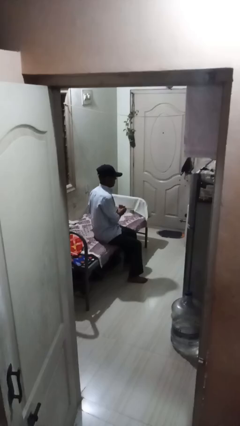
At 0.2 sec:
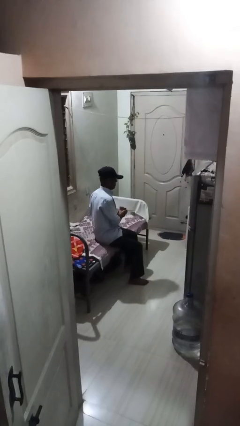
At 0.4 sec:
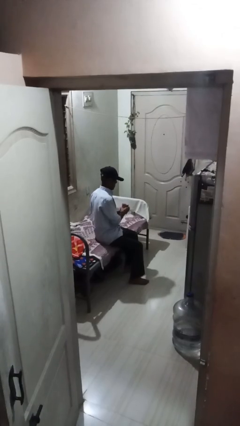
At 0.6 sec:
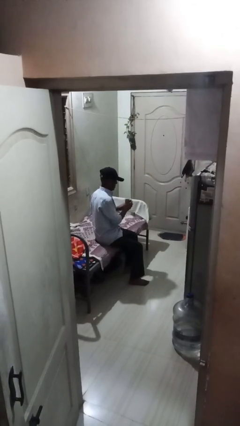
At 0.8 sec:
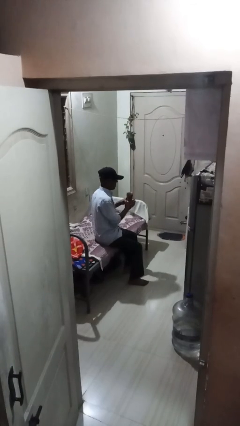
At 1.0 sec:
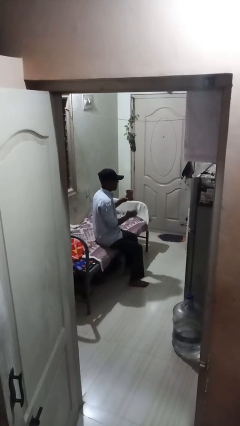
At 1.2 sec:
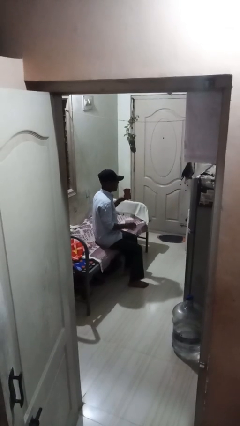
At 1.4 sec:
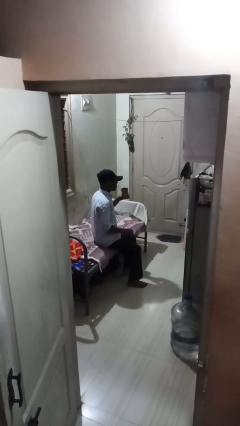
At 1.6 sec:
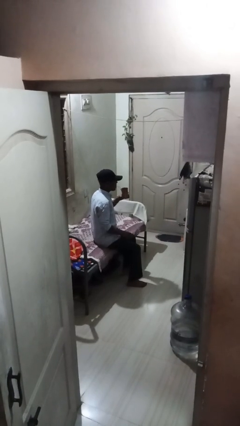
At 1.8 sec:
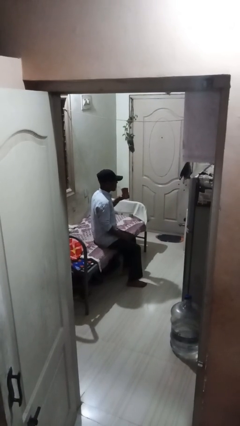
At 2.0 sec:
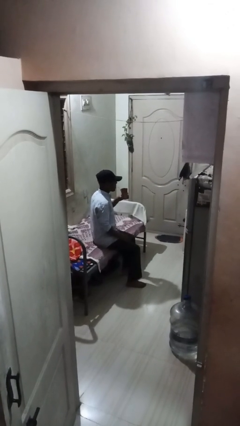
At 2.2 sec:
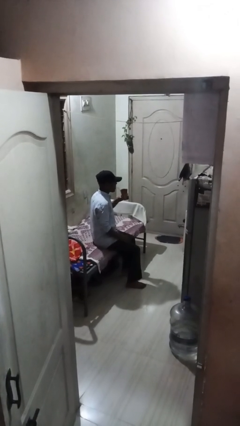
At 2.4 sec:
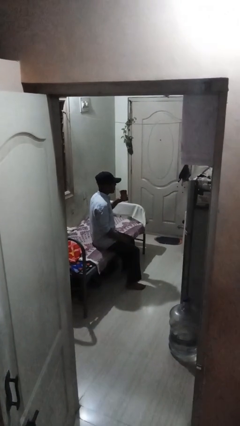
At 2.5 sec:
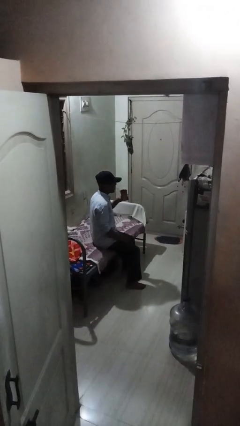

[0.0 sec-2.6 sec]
person drinks from straw

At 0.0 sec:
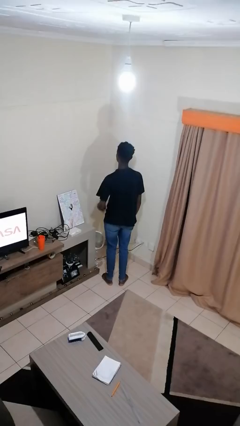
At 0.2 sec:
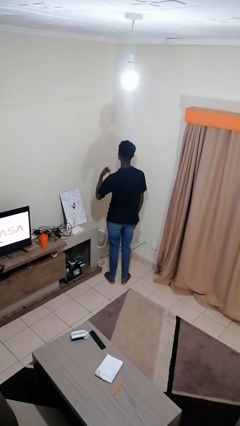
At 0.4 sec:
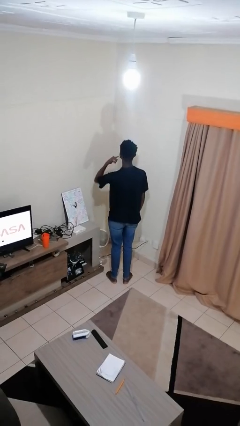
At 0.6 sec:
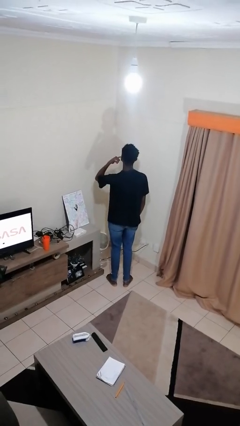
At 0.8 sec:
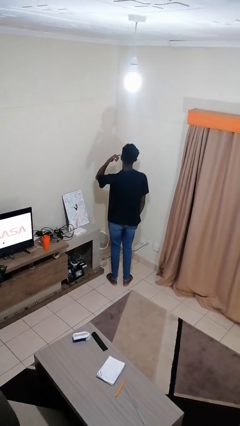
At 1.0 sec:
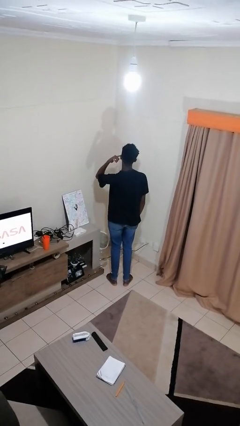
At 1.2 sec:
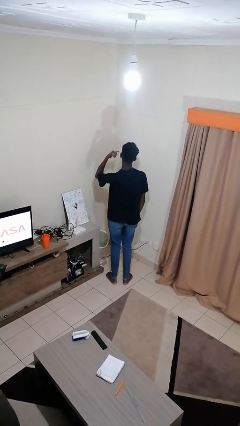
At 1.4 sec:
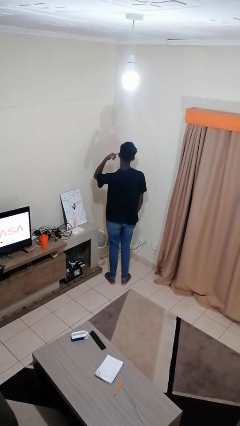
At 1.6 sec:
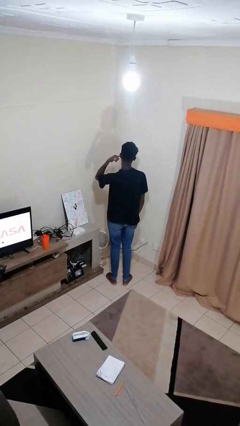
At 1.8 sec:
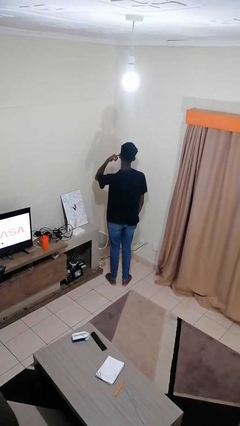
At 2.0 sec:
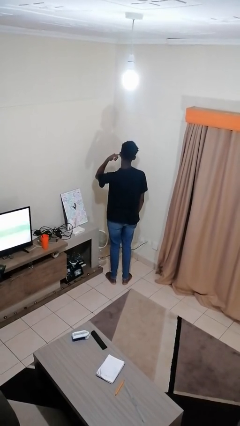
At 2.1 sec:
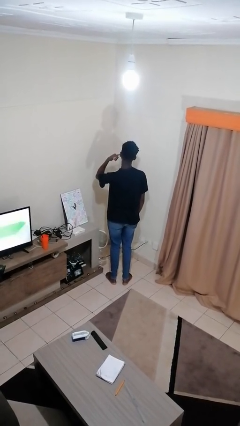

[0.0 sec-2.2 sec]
person gestures call me

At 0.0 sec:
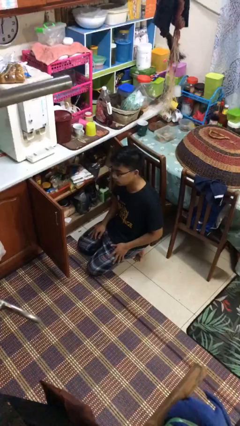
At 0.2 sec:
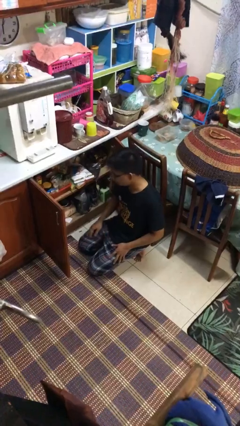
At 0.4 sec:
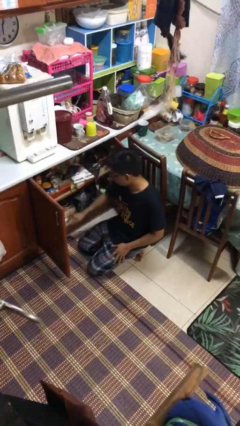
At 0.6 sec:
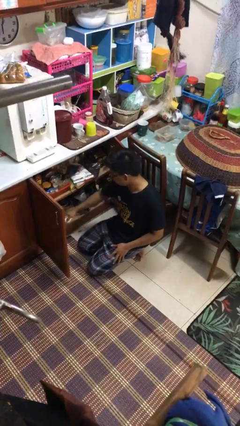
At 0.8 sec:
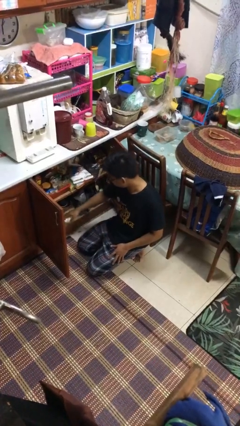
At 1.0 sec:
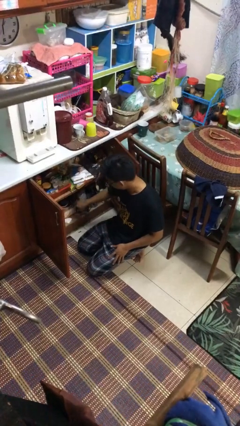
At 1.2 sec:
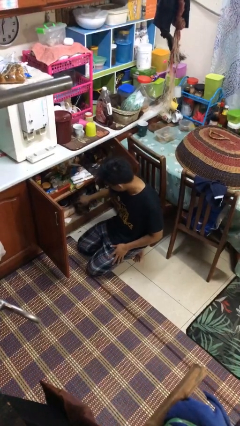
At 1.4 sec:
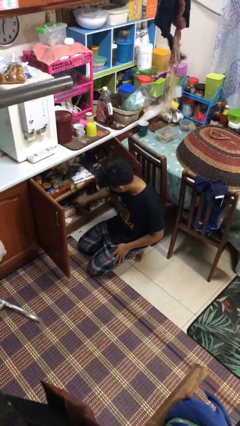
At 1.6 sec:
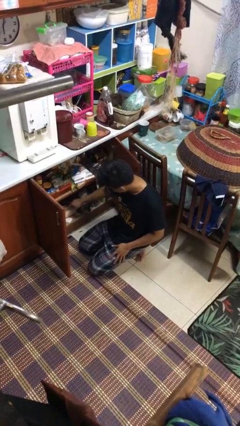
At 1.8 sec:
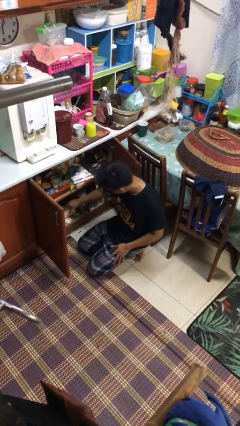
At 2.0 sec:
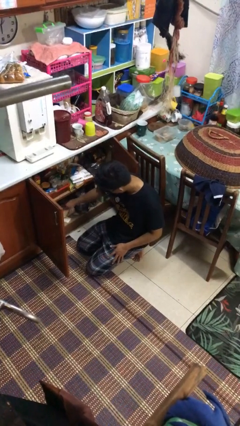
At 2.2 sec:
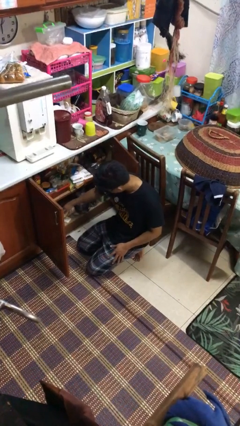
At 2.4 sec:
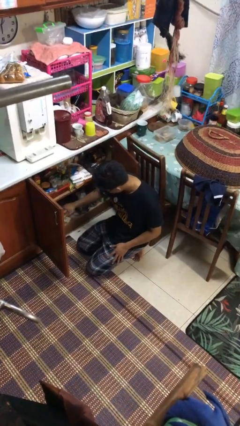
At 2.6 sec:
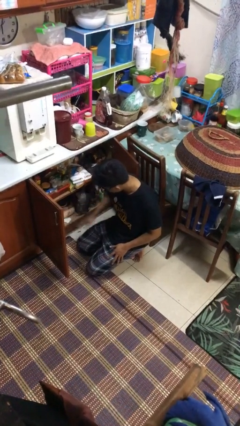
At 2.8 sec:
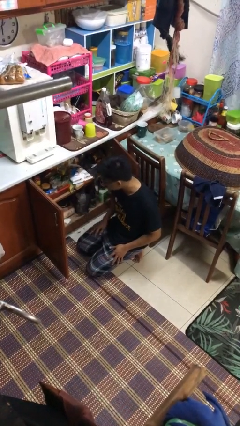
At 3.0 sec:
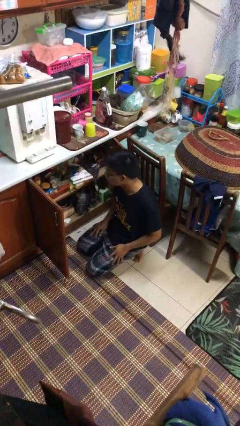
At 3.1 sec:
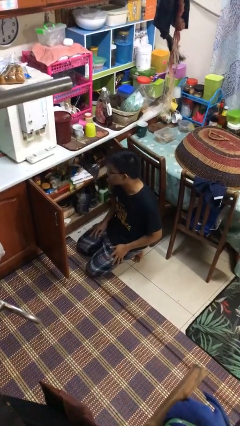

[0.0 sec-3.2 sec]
person searches in kitchen drawer

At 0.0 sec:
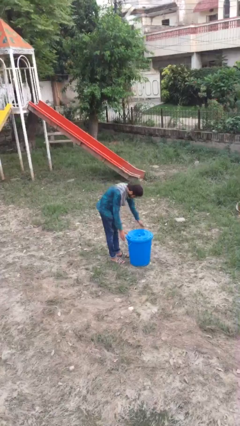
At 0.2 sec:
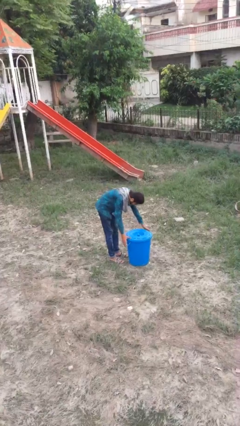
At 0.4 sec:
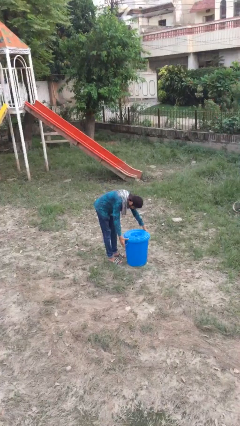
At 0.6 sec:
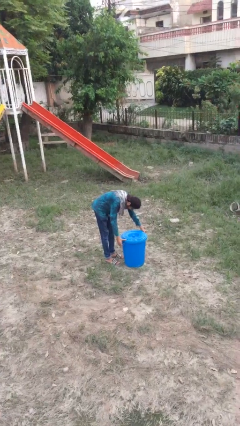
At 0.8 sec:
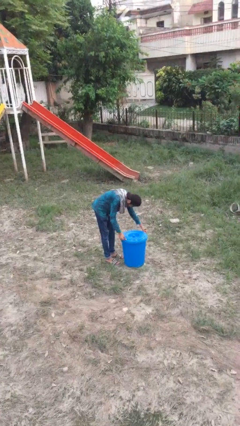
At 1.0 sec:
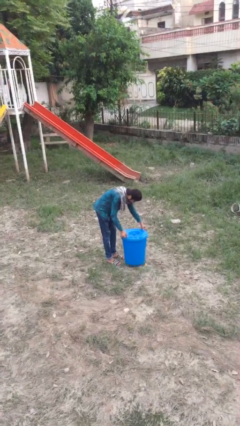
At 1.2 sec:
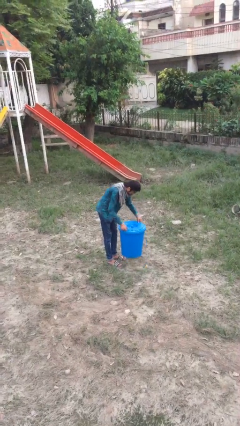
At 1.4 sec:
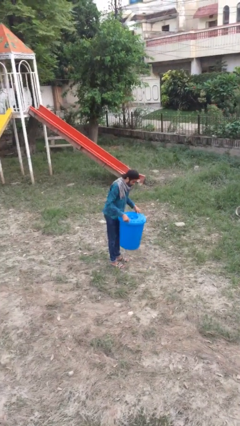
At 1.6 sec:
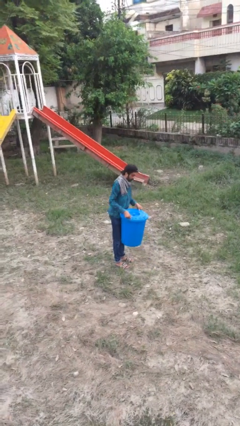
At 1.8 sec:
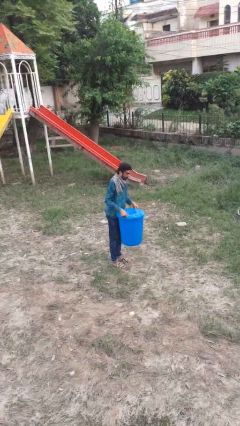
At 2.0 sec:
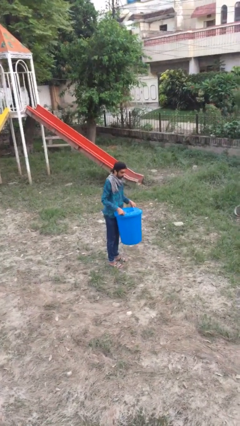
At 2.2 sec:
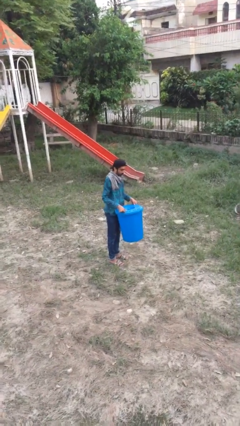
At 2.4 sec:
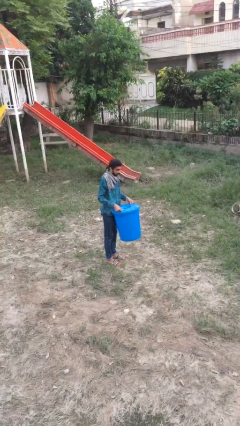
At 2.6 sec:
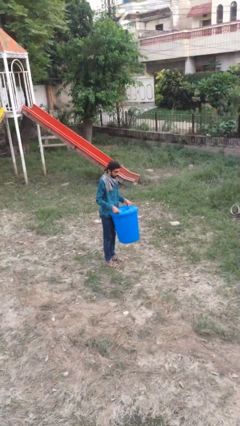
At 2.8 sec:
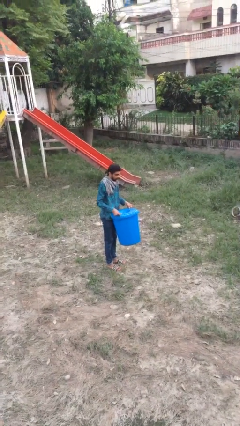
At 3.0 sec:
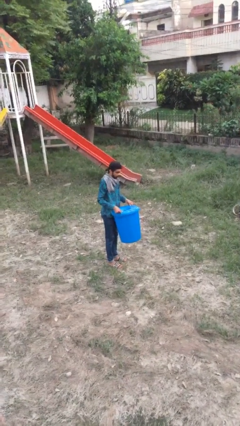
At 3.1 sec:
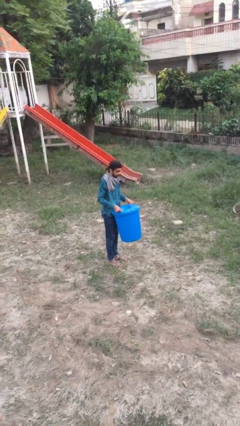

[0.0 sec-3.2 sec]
person picks up object from floor

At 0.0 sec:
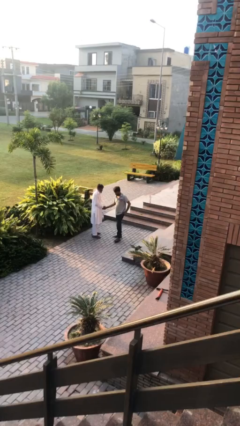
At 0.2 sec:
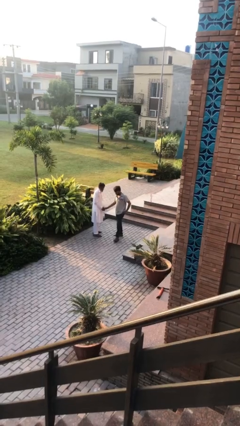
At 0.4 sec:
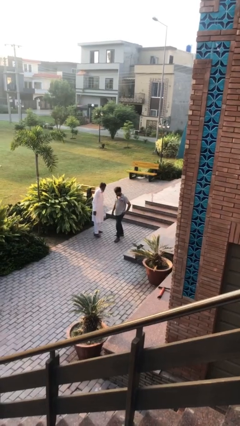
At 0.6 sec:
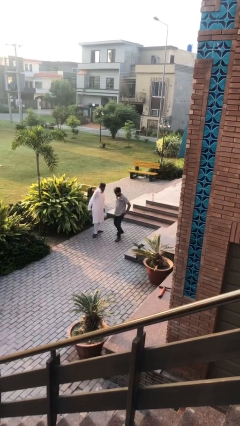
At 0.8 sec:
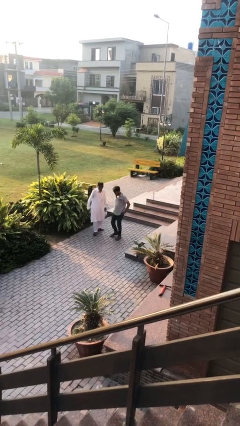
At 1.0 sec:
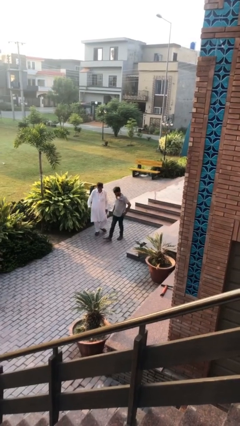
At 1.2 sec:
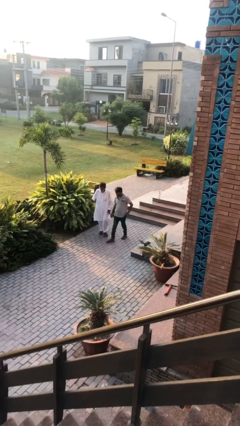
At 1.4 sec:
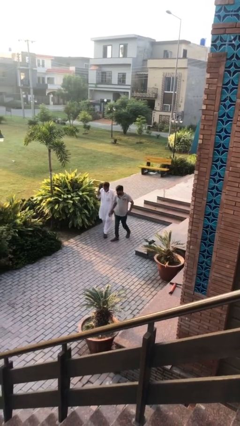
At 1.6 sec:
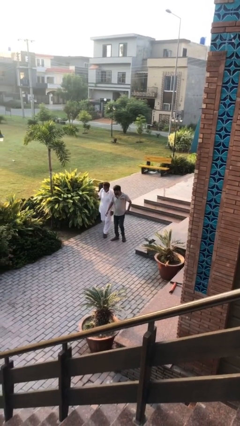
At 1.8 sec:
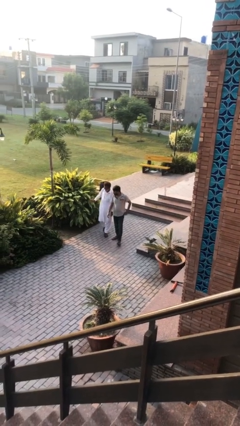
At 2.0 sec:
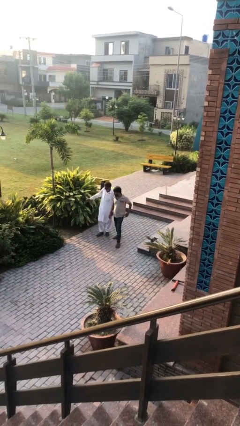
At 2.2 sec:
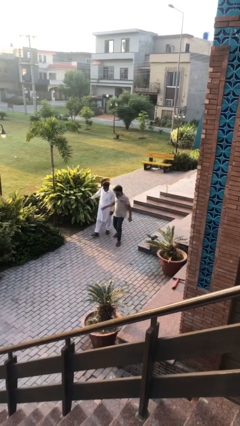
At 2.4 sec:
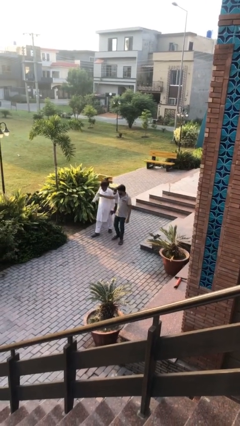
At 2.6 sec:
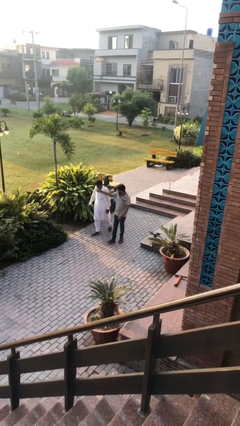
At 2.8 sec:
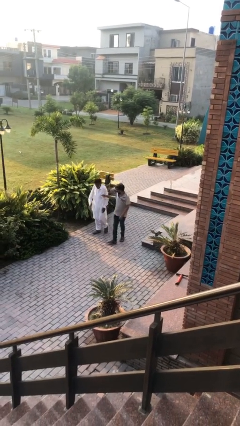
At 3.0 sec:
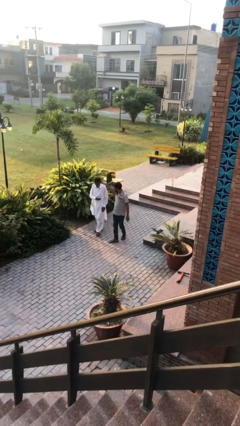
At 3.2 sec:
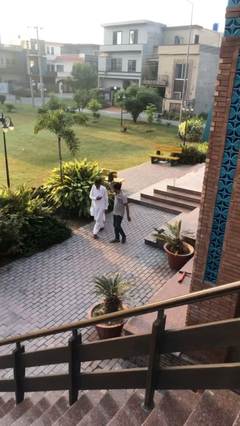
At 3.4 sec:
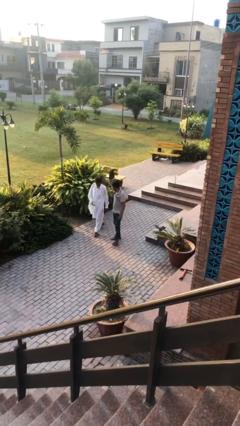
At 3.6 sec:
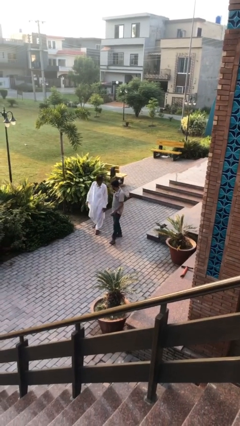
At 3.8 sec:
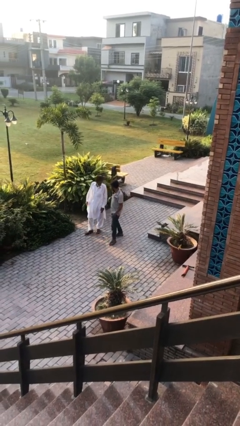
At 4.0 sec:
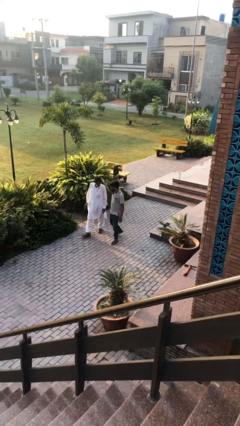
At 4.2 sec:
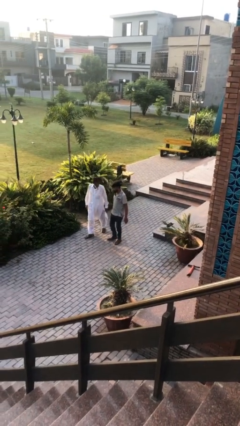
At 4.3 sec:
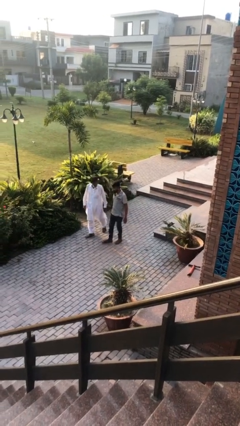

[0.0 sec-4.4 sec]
person talks to person

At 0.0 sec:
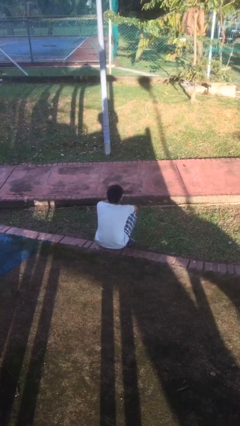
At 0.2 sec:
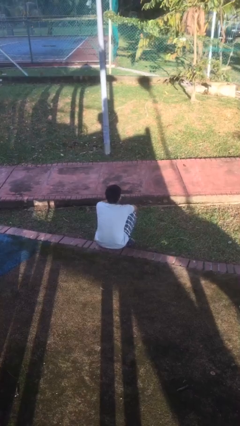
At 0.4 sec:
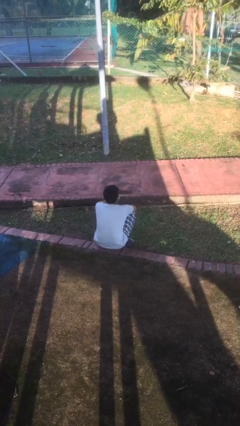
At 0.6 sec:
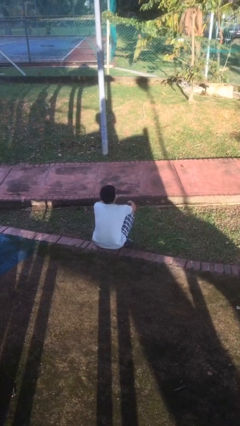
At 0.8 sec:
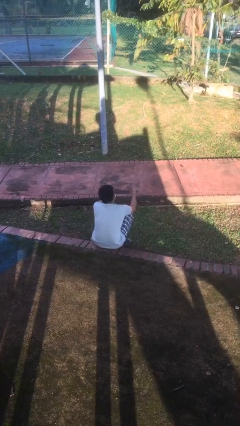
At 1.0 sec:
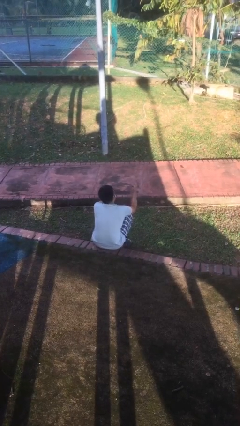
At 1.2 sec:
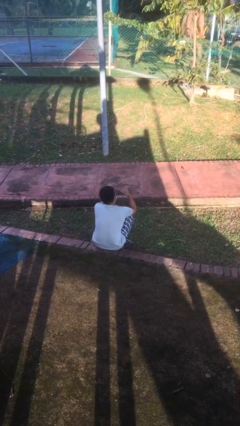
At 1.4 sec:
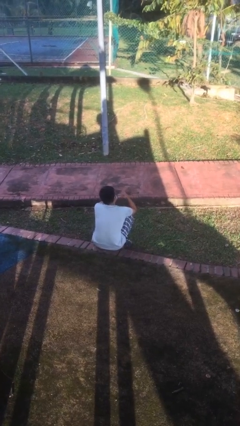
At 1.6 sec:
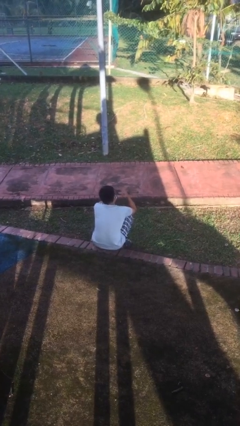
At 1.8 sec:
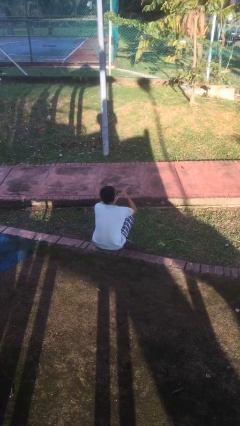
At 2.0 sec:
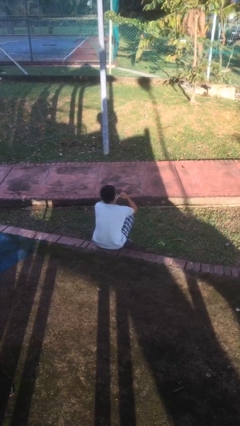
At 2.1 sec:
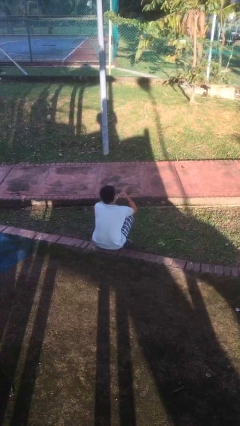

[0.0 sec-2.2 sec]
person gestures listen closely
